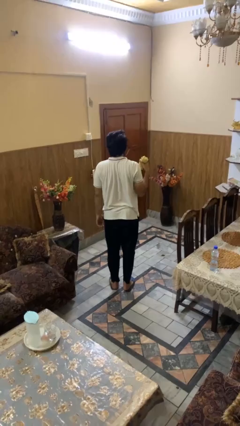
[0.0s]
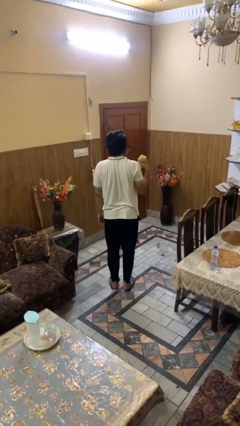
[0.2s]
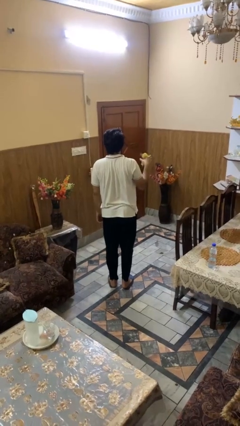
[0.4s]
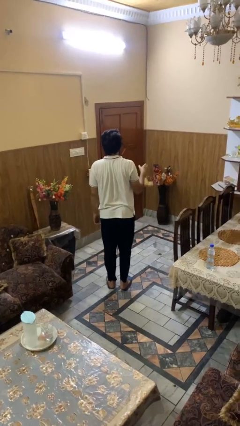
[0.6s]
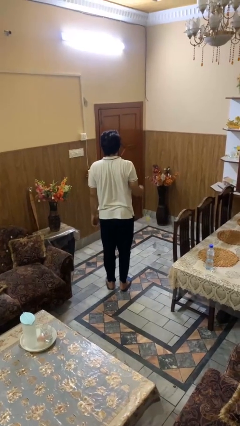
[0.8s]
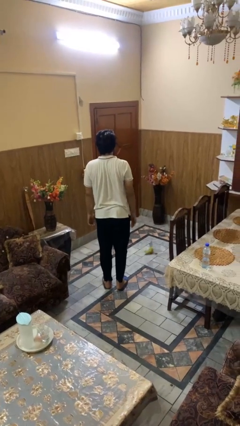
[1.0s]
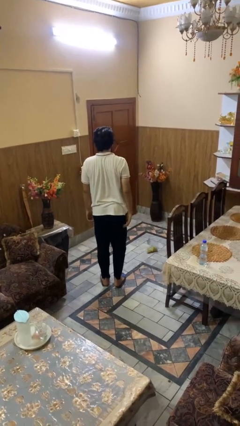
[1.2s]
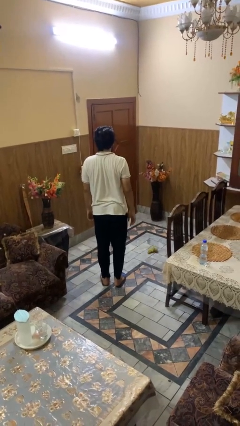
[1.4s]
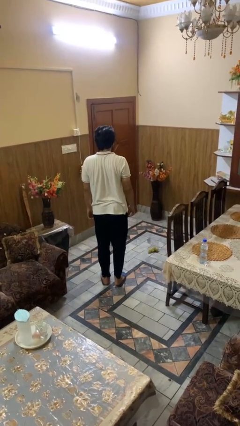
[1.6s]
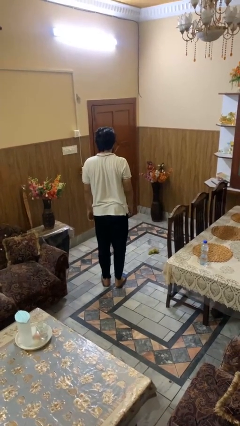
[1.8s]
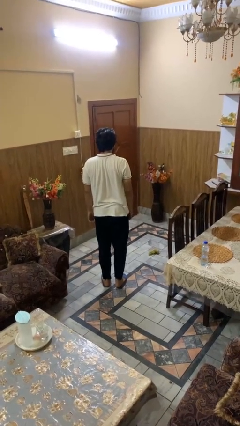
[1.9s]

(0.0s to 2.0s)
person throws object to ground

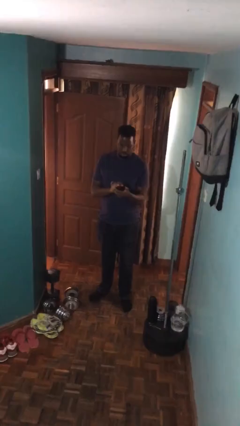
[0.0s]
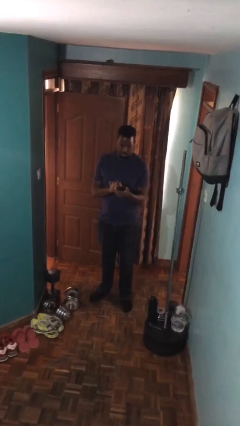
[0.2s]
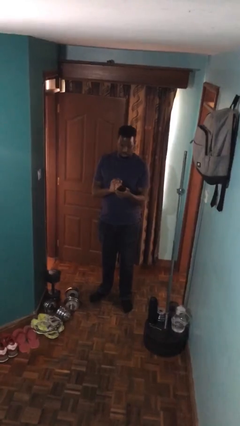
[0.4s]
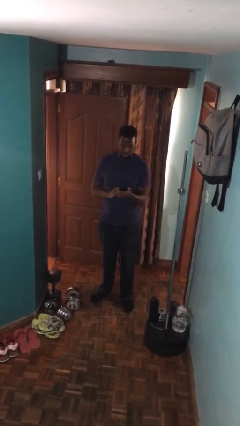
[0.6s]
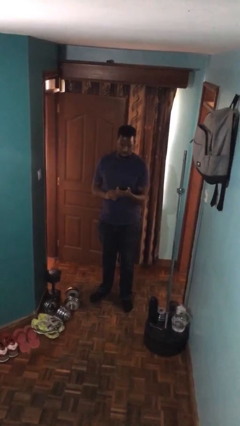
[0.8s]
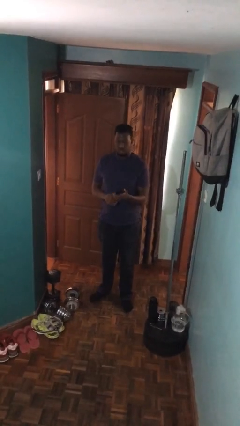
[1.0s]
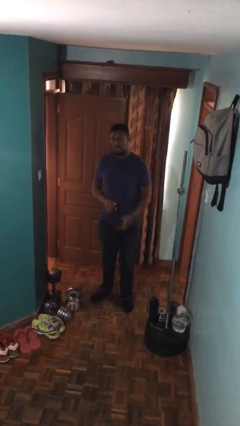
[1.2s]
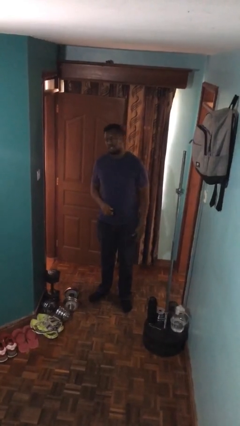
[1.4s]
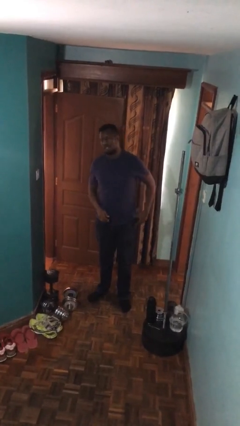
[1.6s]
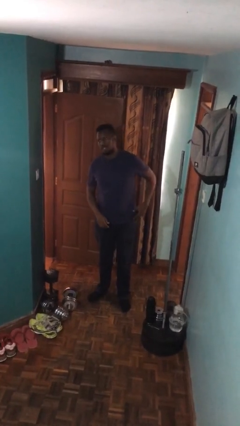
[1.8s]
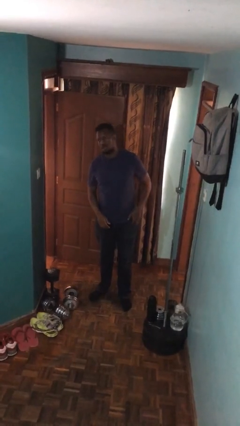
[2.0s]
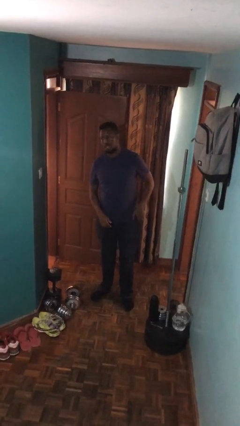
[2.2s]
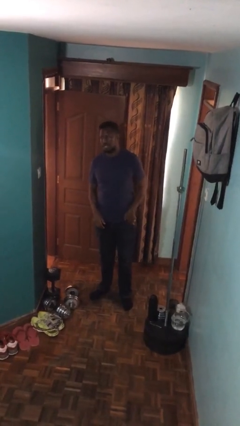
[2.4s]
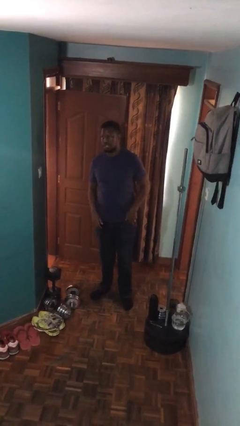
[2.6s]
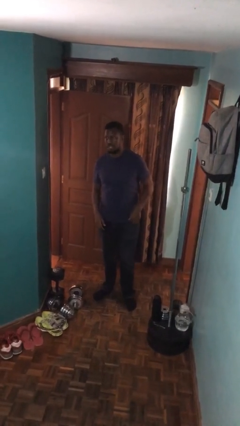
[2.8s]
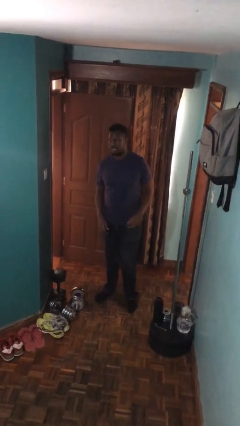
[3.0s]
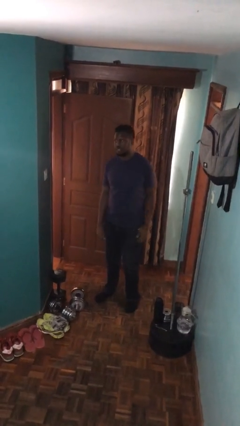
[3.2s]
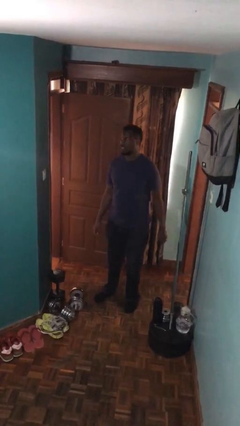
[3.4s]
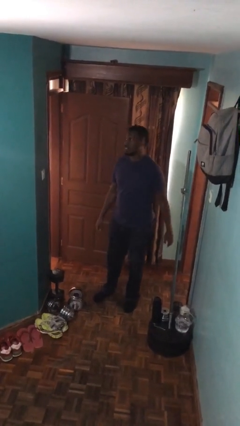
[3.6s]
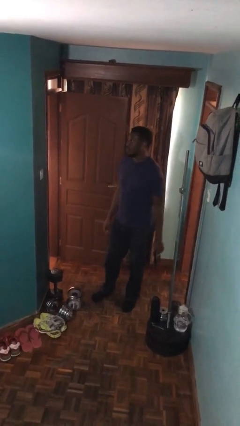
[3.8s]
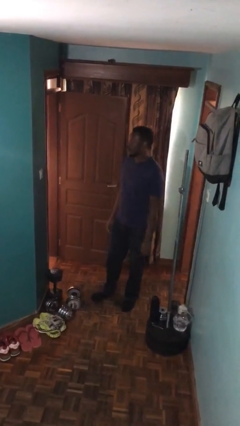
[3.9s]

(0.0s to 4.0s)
person puts phone into pocket

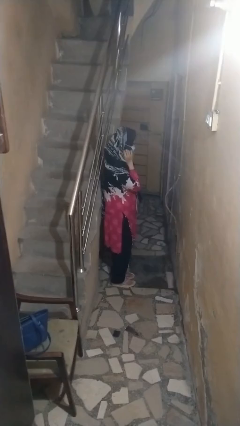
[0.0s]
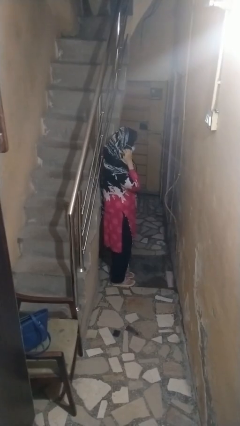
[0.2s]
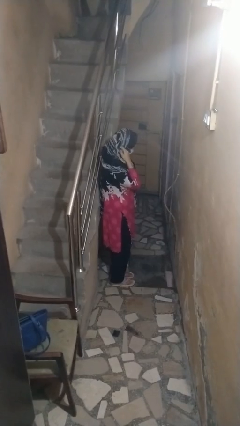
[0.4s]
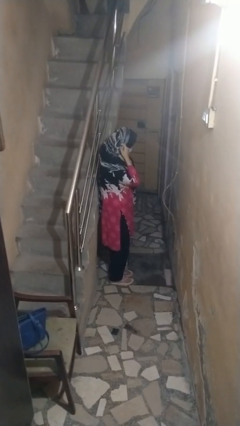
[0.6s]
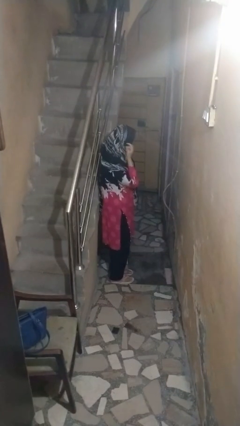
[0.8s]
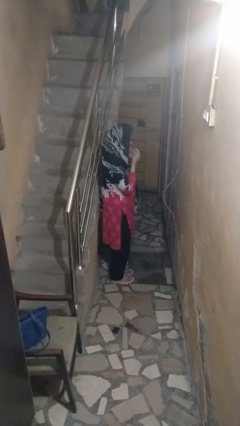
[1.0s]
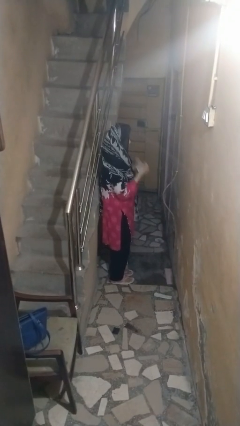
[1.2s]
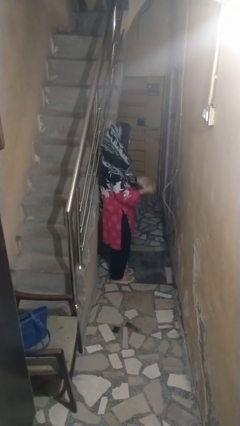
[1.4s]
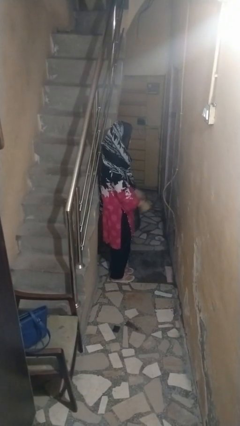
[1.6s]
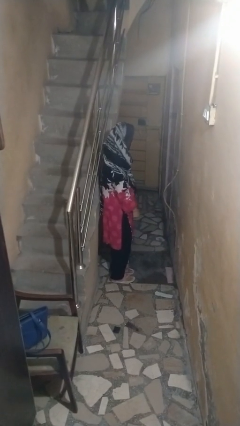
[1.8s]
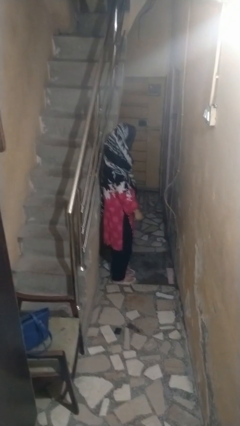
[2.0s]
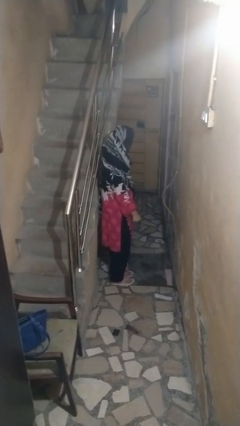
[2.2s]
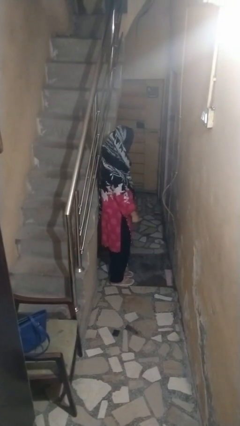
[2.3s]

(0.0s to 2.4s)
person takes off facemask

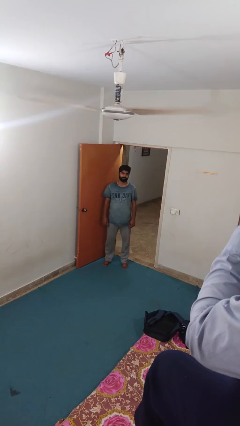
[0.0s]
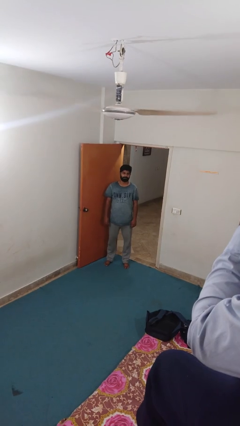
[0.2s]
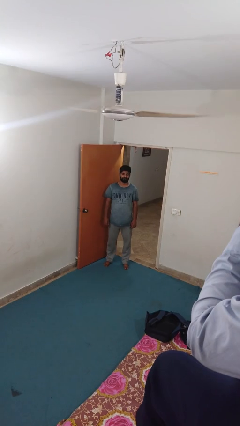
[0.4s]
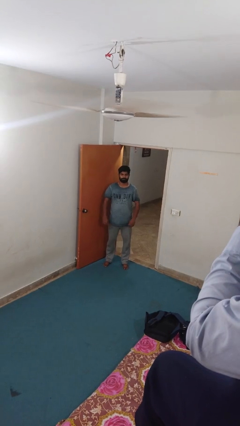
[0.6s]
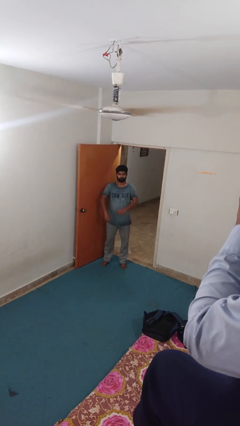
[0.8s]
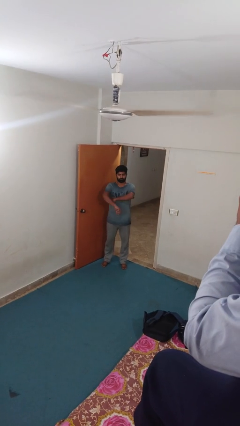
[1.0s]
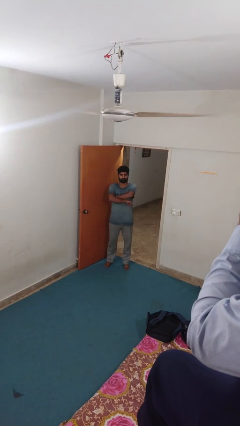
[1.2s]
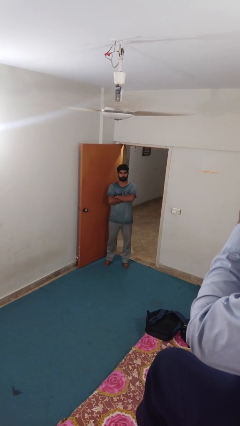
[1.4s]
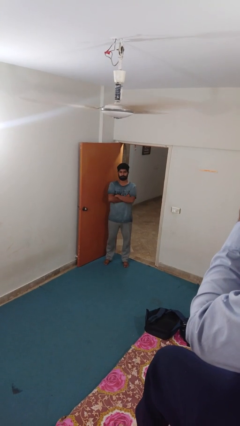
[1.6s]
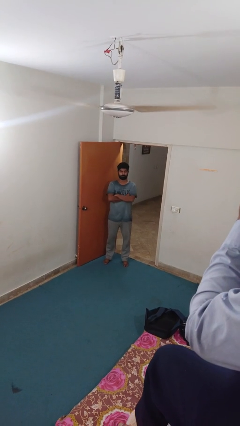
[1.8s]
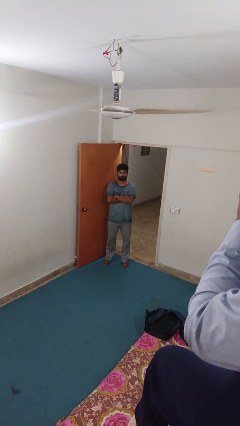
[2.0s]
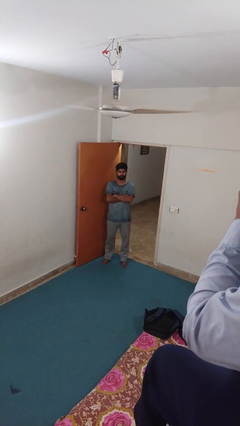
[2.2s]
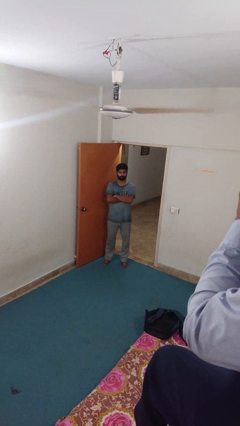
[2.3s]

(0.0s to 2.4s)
person crosses arms

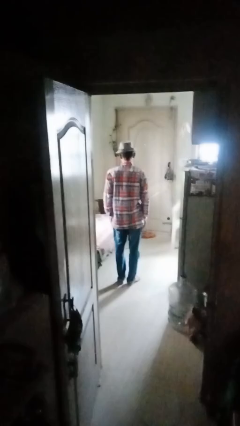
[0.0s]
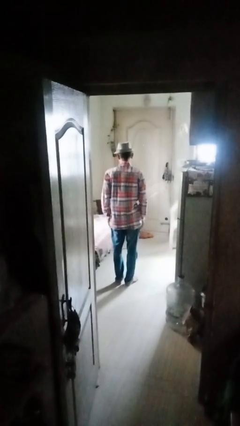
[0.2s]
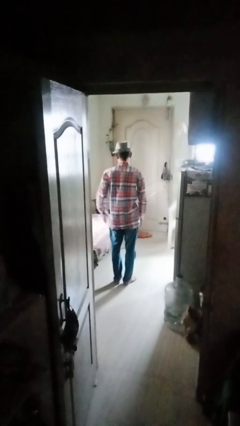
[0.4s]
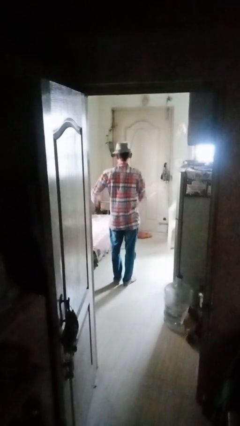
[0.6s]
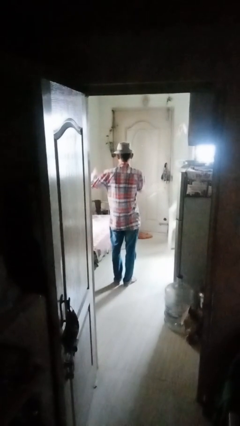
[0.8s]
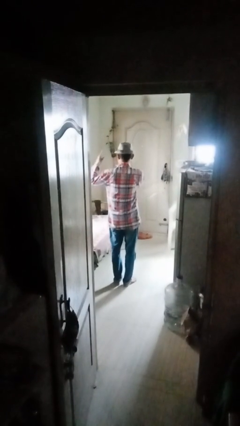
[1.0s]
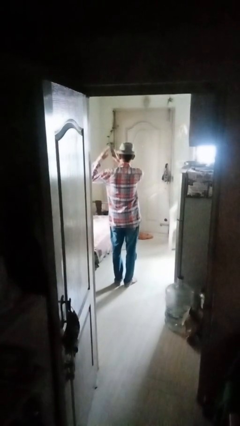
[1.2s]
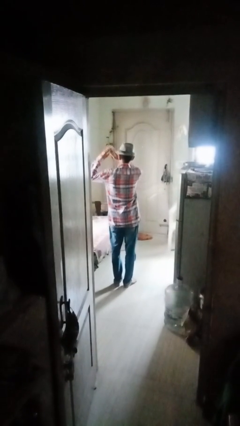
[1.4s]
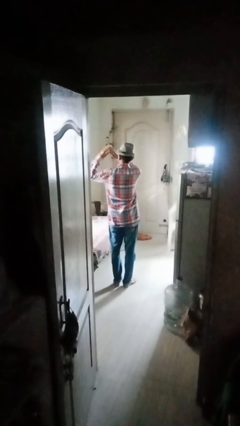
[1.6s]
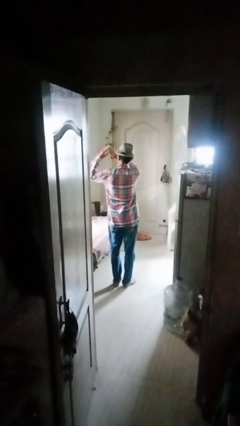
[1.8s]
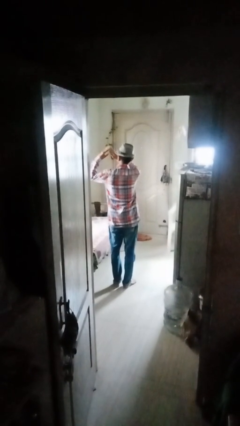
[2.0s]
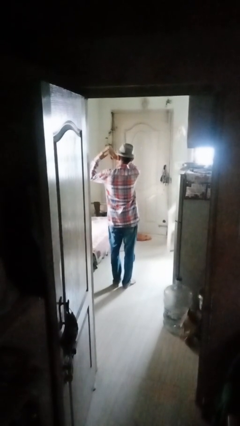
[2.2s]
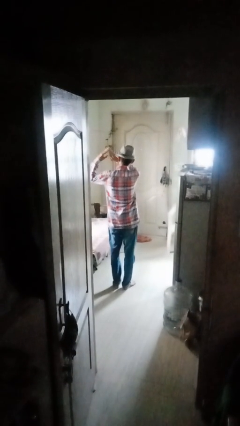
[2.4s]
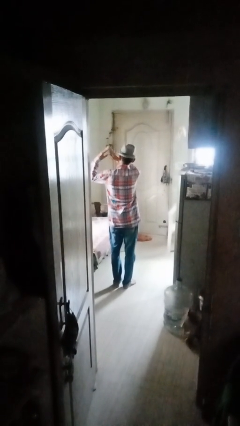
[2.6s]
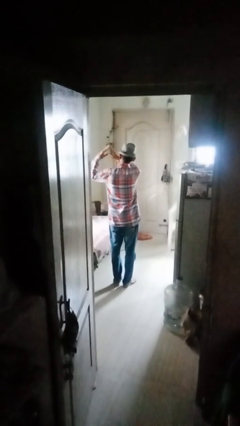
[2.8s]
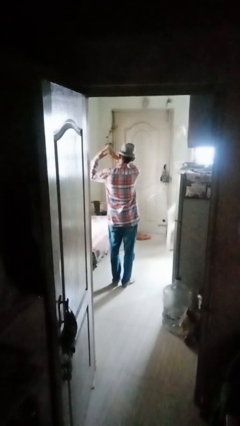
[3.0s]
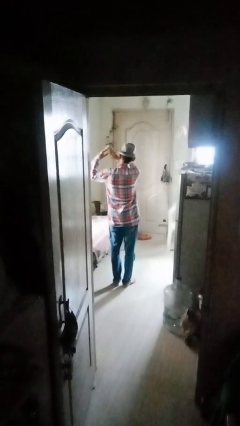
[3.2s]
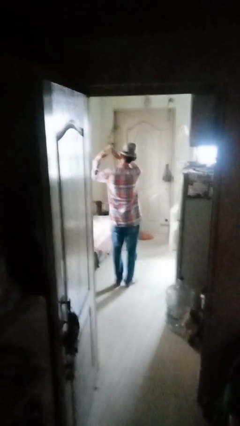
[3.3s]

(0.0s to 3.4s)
person gestures heart

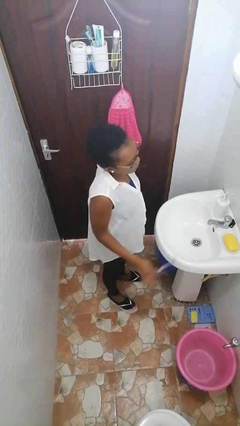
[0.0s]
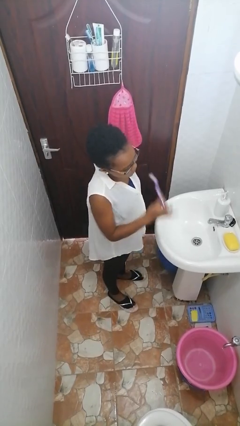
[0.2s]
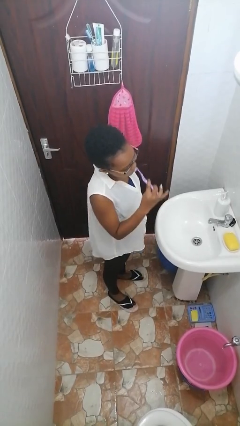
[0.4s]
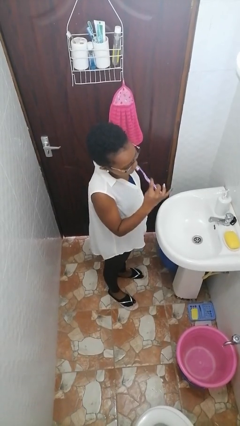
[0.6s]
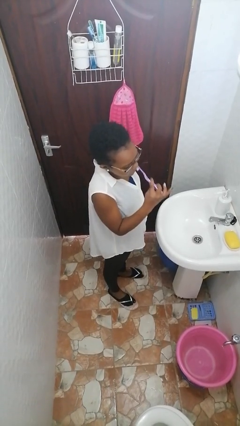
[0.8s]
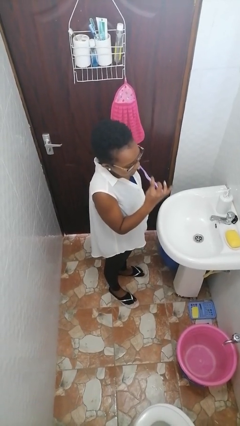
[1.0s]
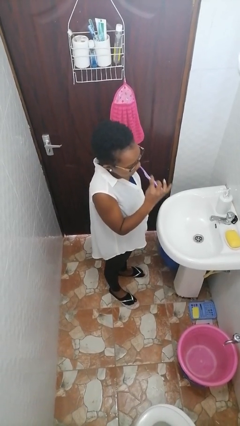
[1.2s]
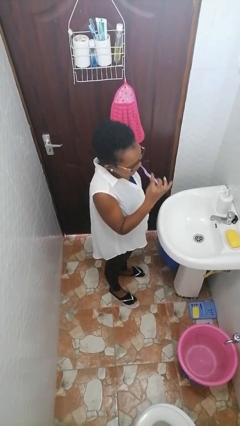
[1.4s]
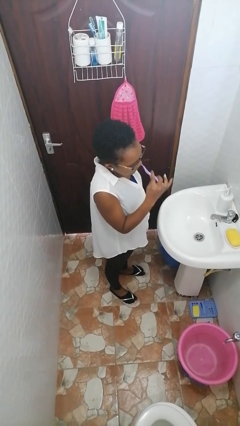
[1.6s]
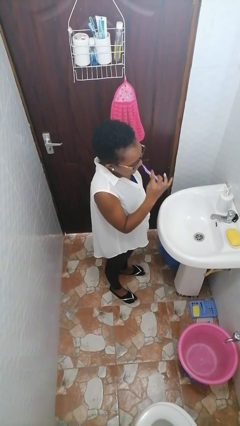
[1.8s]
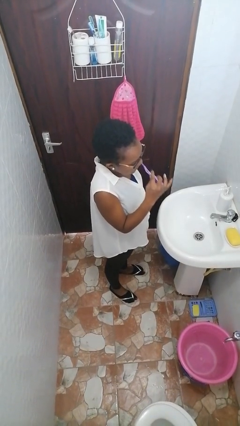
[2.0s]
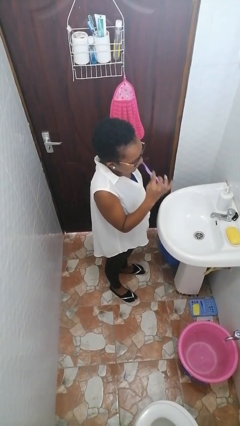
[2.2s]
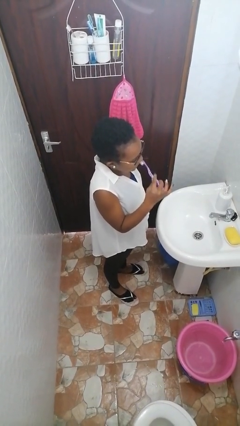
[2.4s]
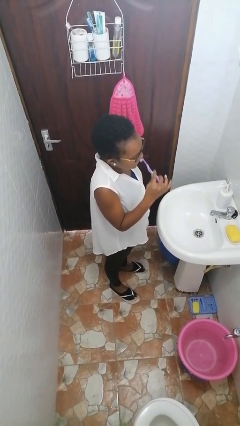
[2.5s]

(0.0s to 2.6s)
person brushes teeth

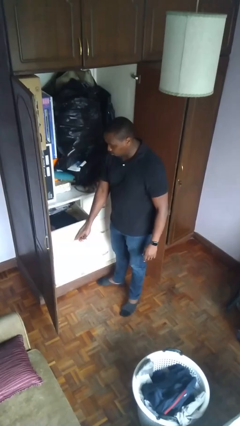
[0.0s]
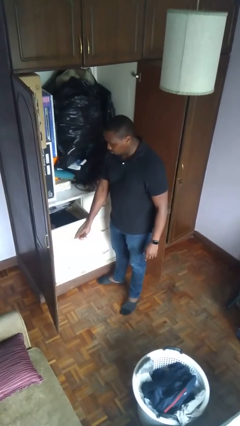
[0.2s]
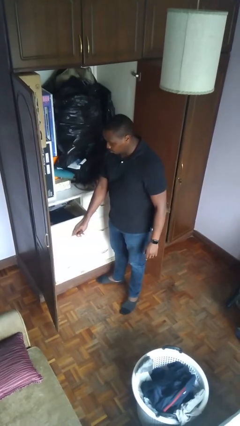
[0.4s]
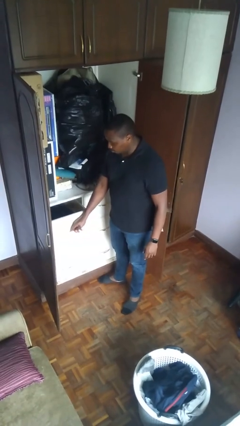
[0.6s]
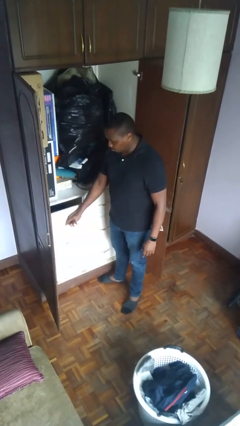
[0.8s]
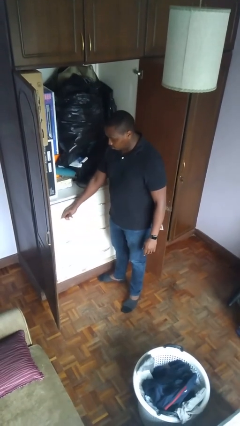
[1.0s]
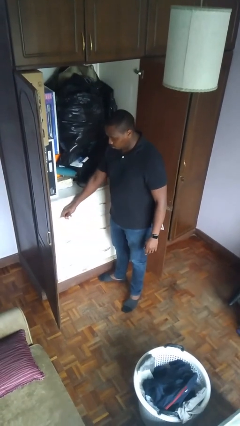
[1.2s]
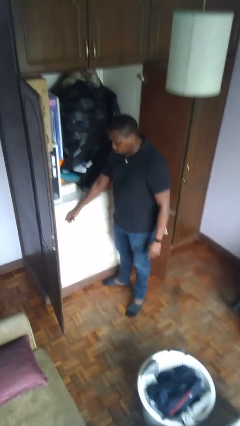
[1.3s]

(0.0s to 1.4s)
person closes dresser drawer
